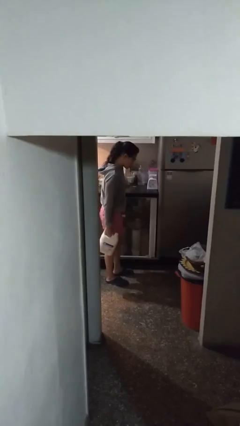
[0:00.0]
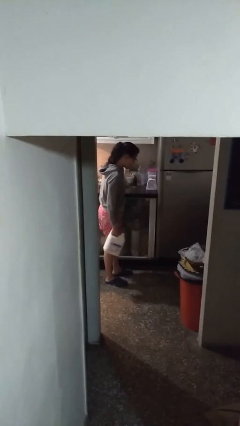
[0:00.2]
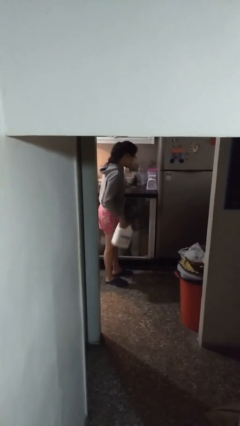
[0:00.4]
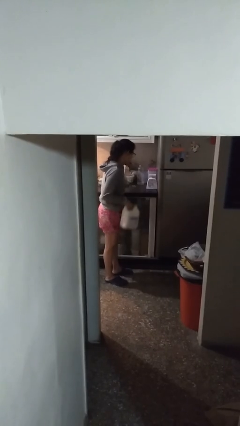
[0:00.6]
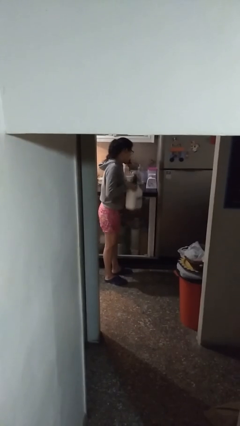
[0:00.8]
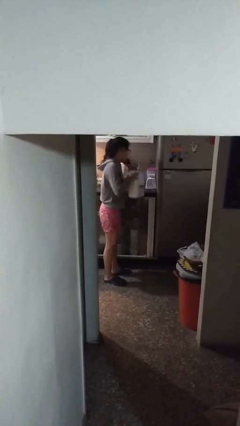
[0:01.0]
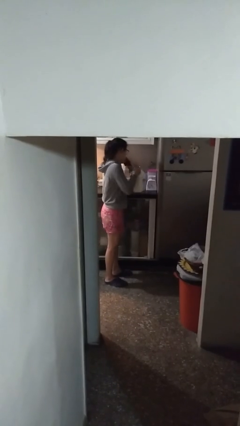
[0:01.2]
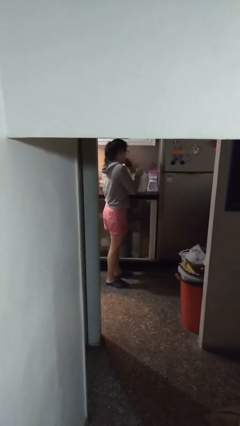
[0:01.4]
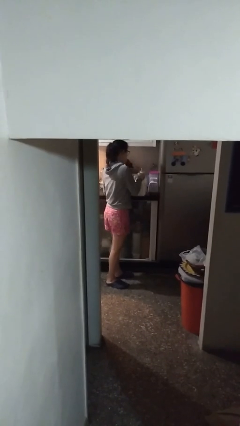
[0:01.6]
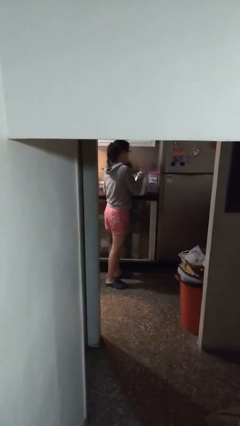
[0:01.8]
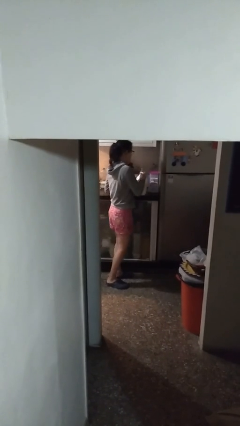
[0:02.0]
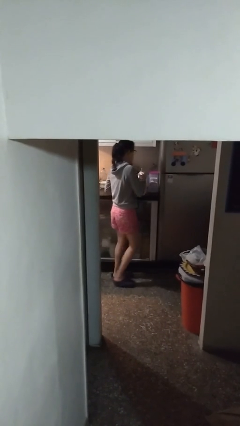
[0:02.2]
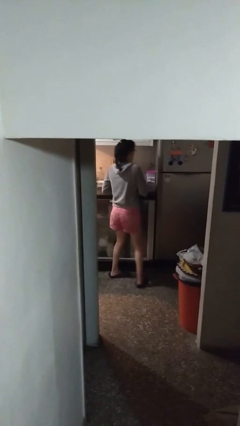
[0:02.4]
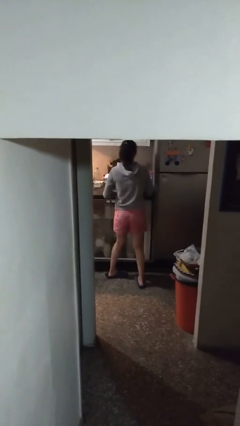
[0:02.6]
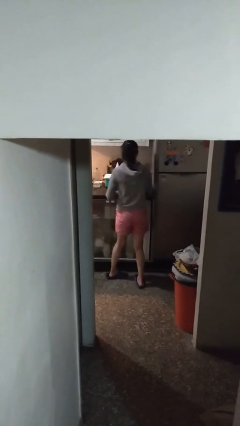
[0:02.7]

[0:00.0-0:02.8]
person puts down object on countertop

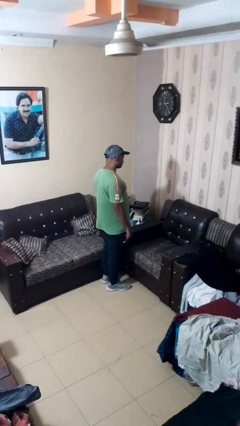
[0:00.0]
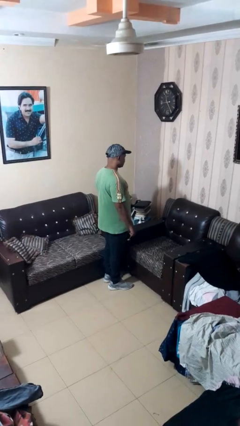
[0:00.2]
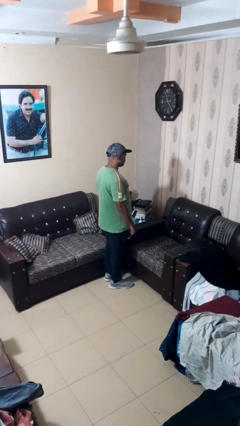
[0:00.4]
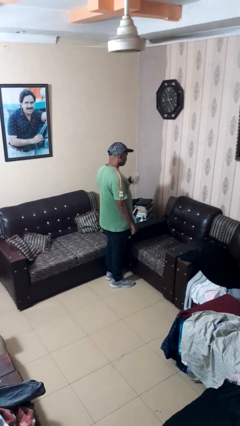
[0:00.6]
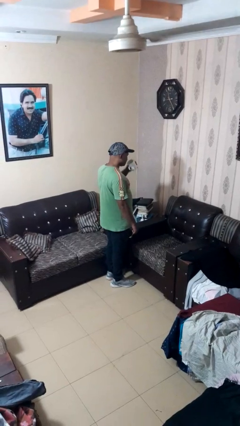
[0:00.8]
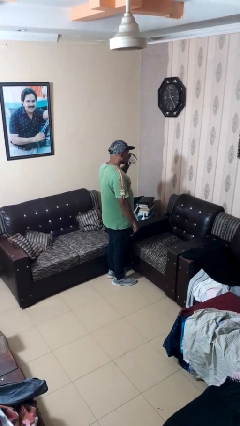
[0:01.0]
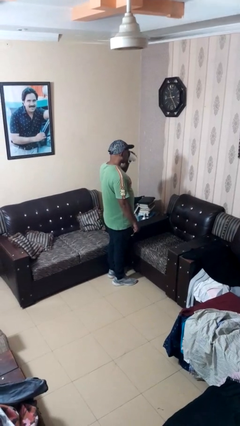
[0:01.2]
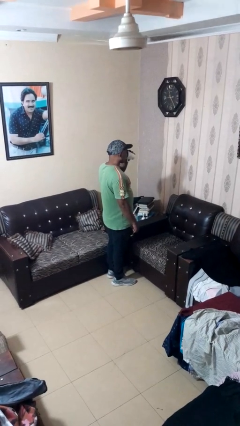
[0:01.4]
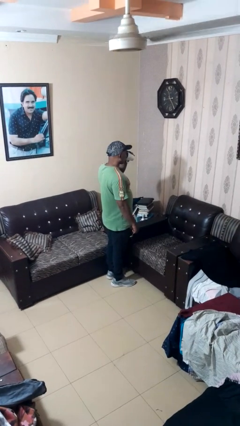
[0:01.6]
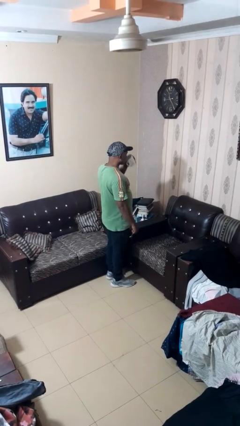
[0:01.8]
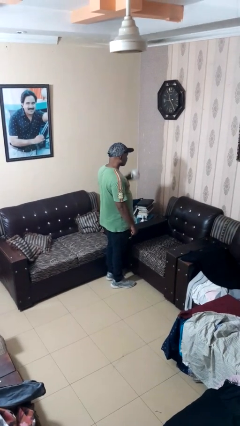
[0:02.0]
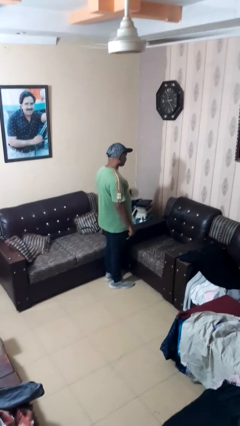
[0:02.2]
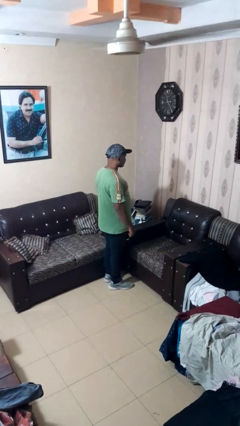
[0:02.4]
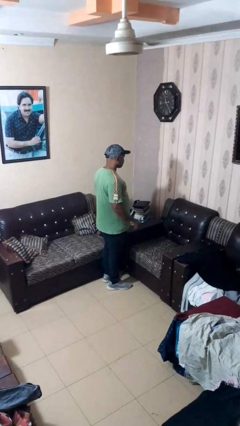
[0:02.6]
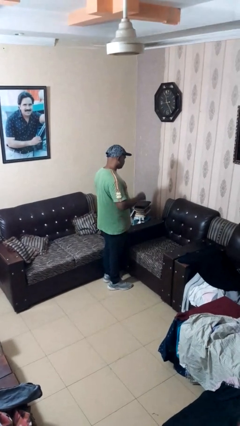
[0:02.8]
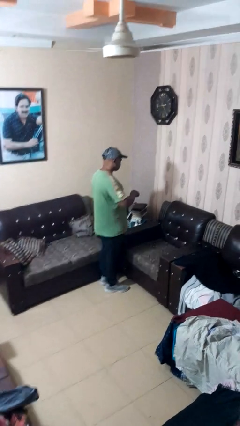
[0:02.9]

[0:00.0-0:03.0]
person drinks from mug

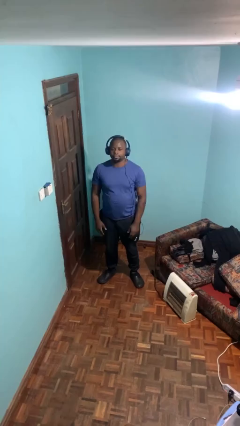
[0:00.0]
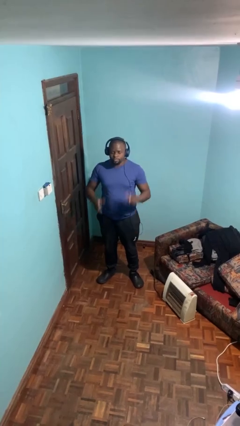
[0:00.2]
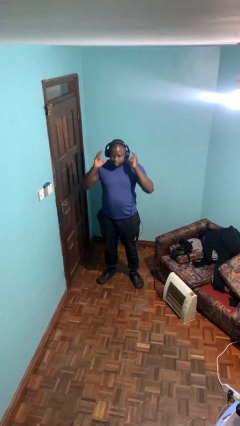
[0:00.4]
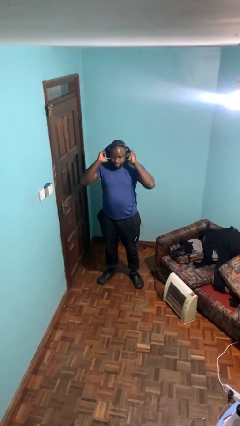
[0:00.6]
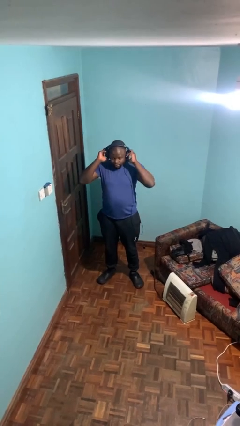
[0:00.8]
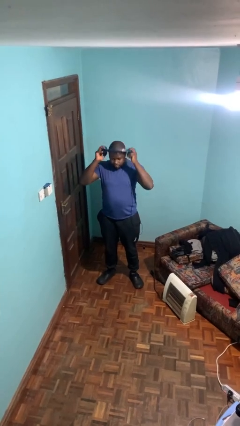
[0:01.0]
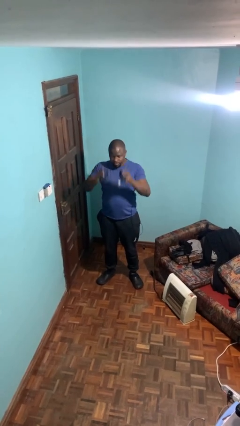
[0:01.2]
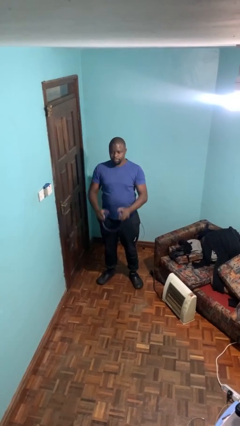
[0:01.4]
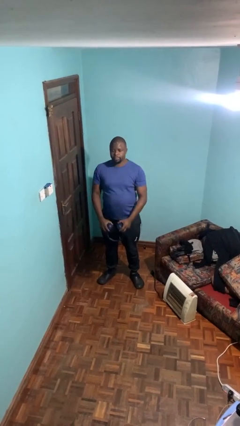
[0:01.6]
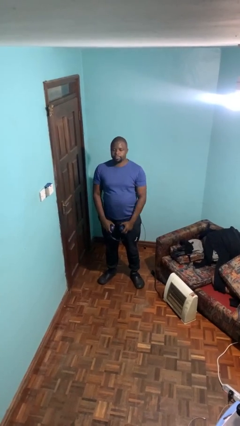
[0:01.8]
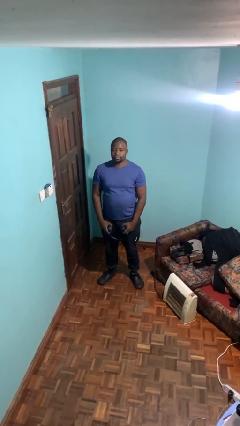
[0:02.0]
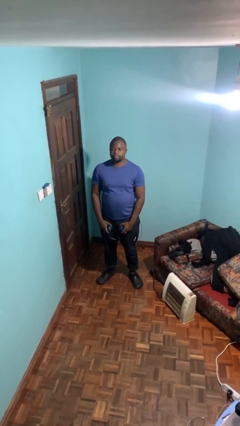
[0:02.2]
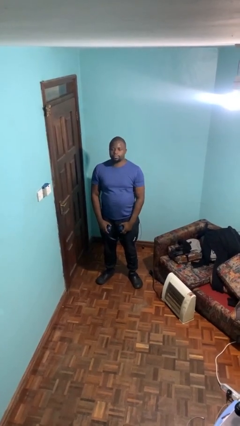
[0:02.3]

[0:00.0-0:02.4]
person takes off headphones

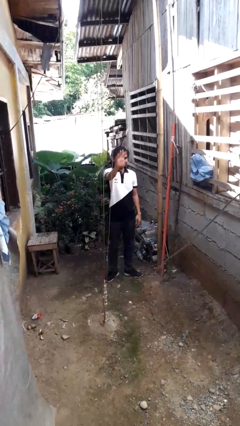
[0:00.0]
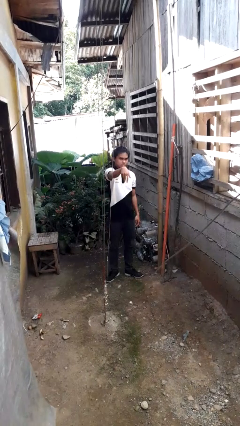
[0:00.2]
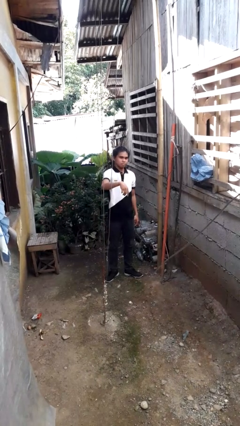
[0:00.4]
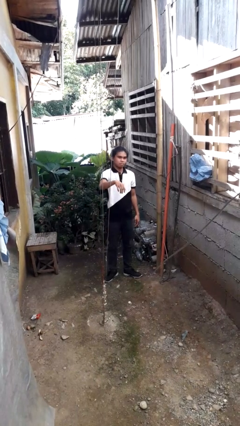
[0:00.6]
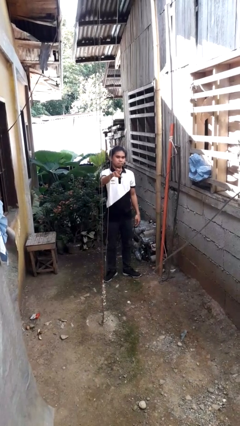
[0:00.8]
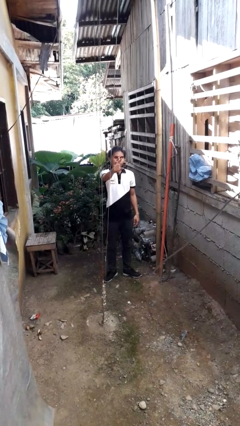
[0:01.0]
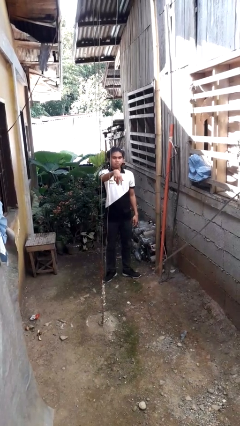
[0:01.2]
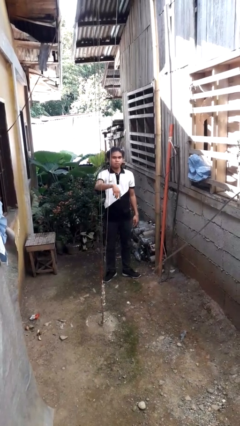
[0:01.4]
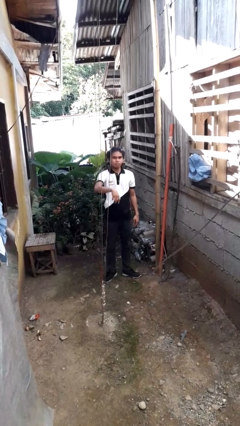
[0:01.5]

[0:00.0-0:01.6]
person gestures come here

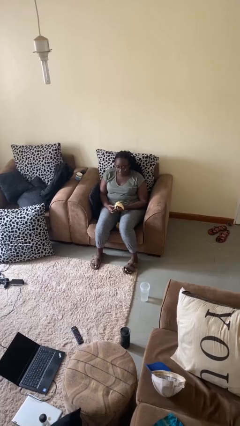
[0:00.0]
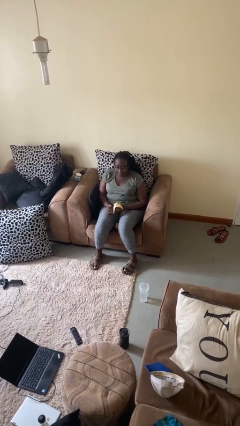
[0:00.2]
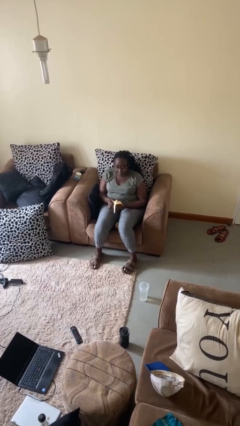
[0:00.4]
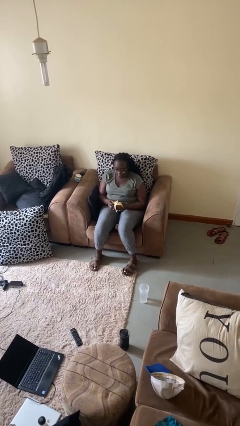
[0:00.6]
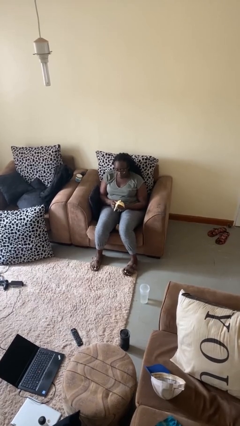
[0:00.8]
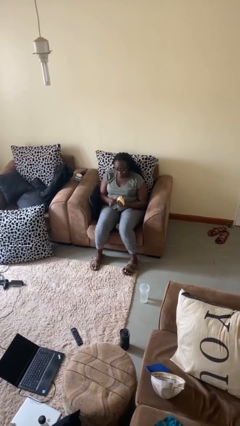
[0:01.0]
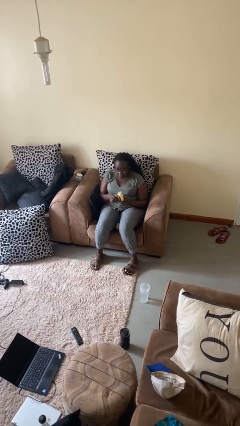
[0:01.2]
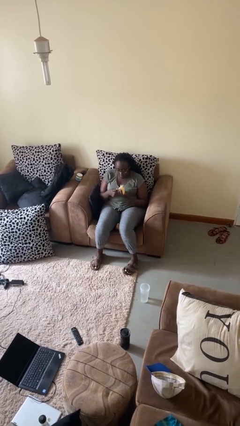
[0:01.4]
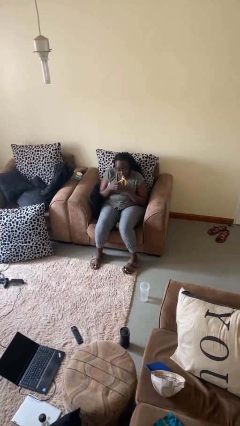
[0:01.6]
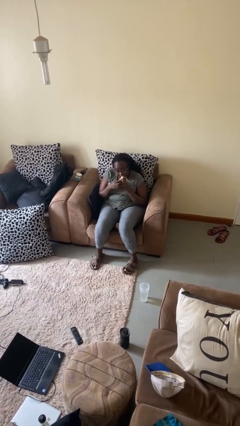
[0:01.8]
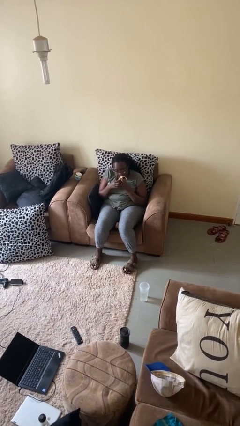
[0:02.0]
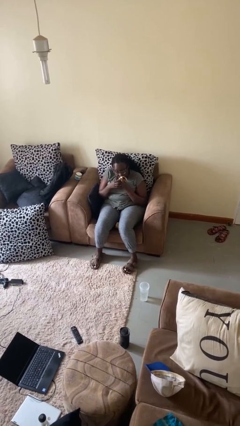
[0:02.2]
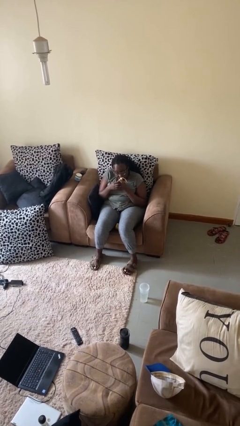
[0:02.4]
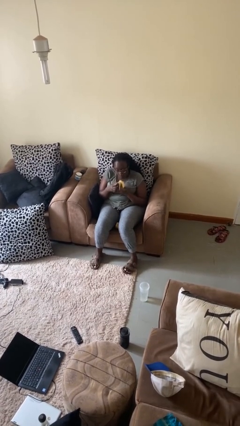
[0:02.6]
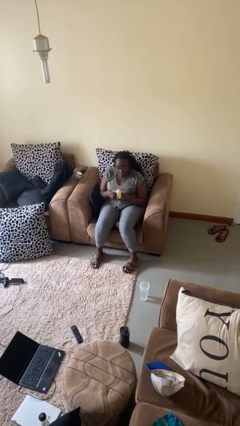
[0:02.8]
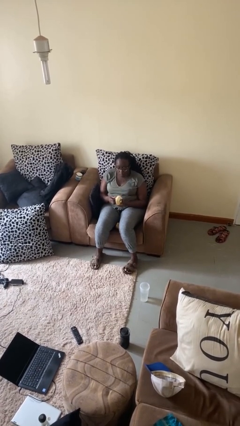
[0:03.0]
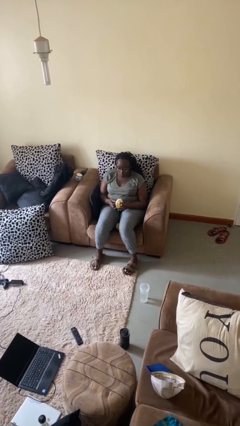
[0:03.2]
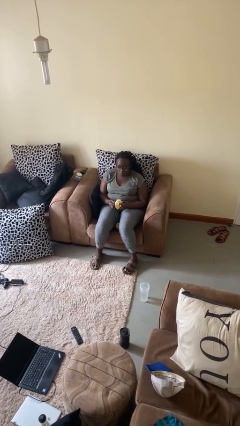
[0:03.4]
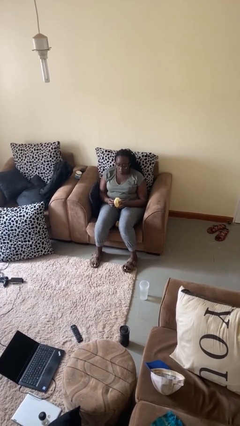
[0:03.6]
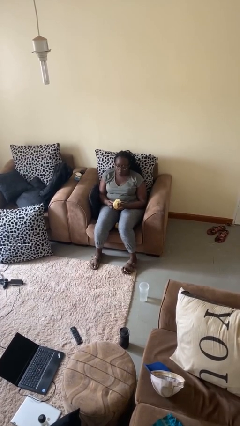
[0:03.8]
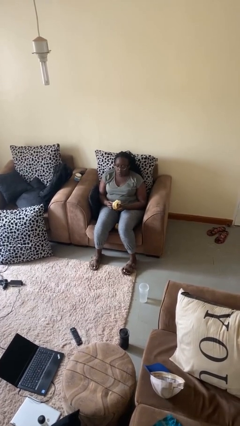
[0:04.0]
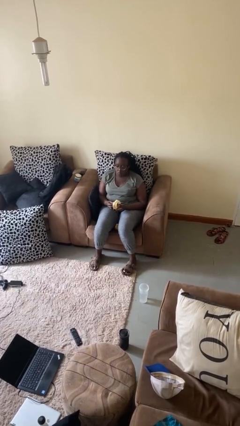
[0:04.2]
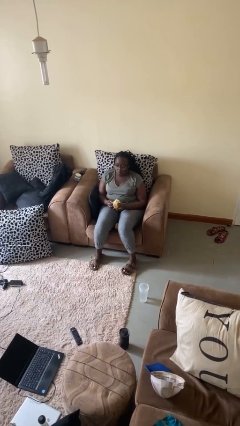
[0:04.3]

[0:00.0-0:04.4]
person eats banana

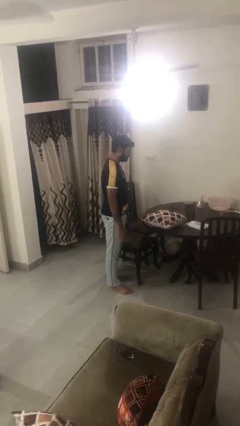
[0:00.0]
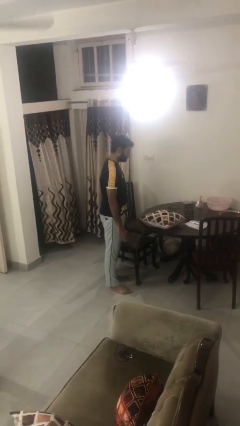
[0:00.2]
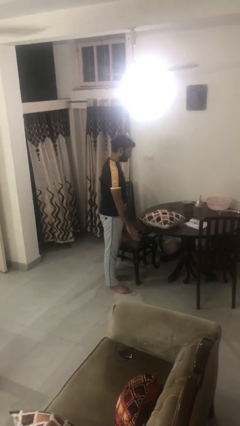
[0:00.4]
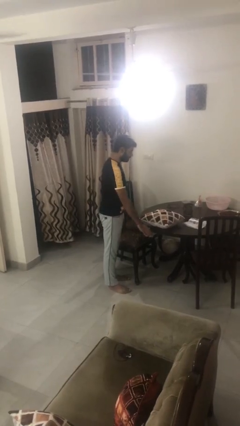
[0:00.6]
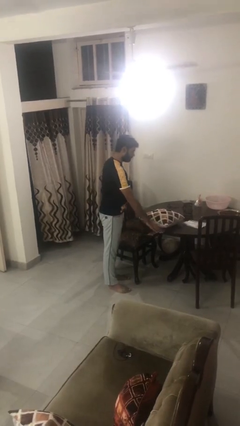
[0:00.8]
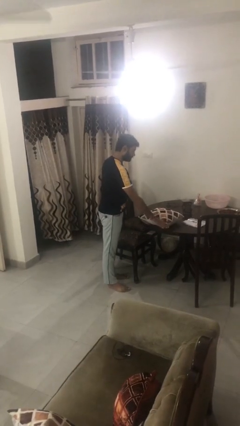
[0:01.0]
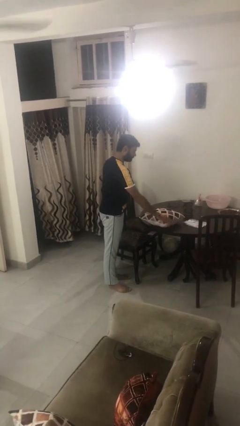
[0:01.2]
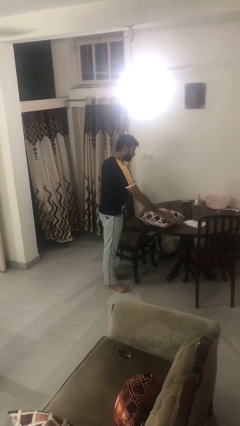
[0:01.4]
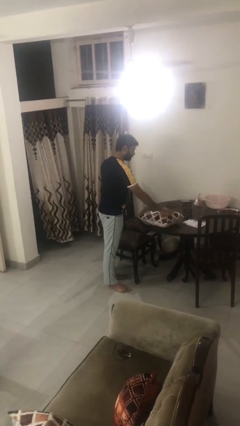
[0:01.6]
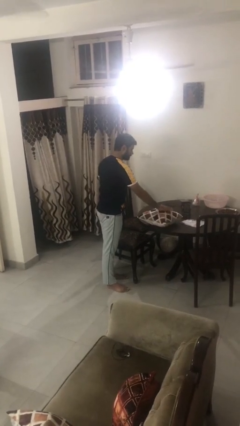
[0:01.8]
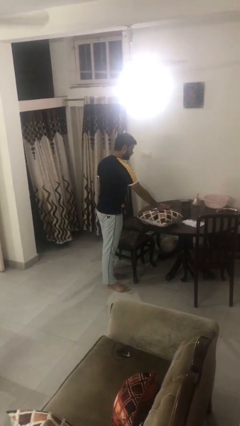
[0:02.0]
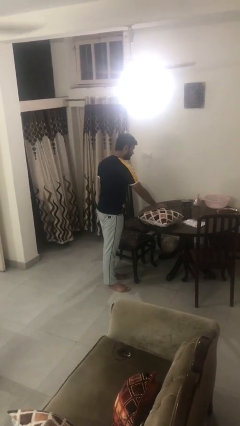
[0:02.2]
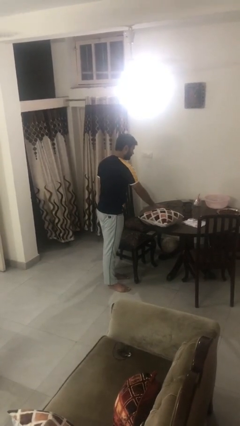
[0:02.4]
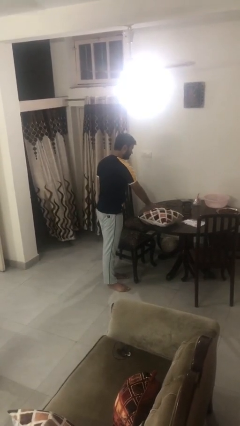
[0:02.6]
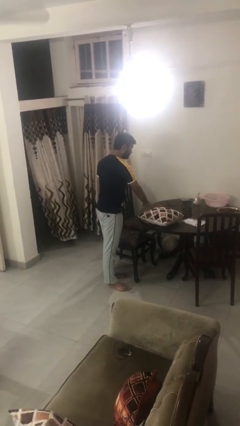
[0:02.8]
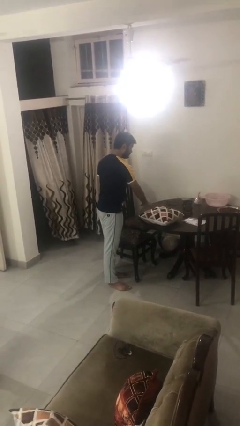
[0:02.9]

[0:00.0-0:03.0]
person waves hand over object
